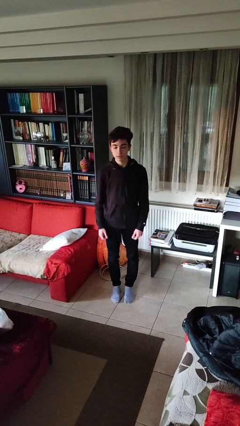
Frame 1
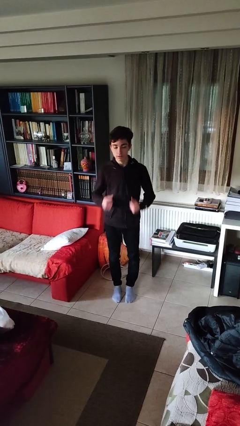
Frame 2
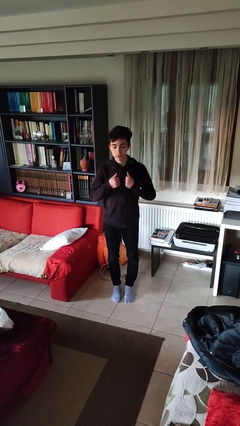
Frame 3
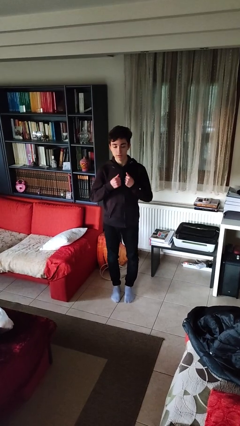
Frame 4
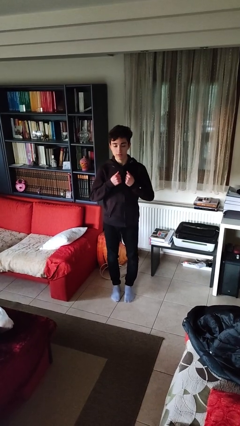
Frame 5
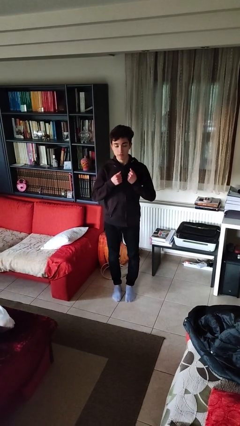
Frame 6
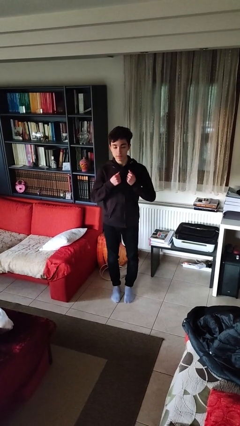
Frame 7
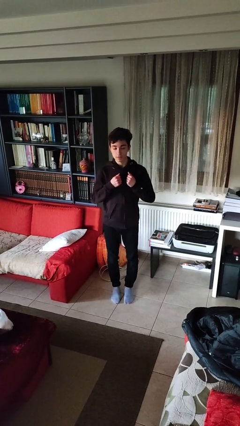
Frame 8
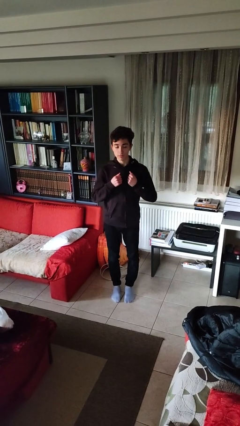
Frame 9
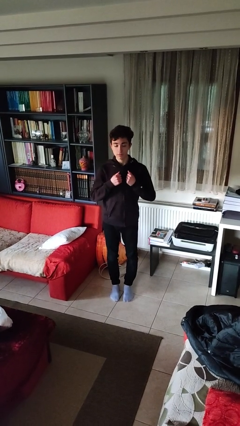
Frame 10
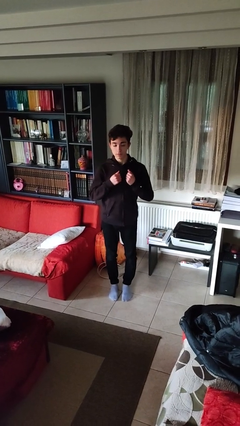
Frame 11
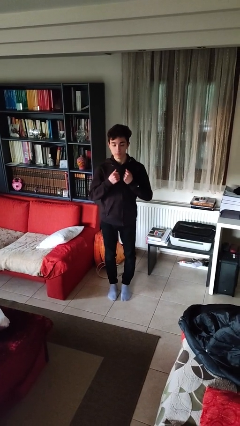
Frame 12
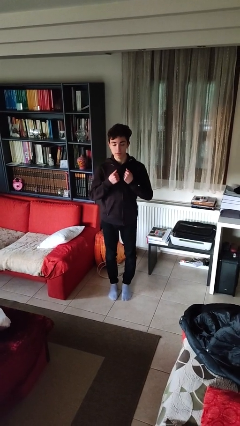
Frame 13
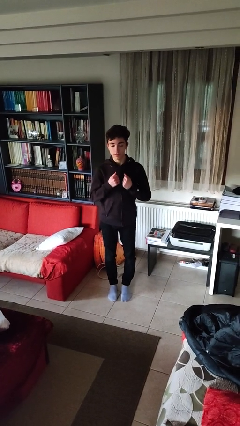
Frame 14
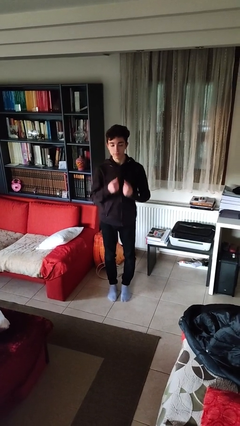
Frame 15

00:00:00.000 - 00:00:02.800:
person drums on chest

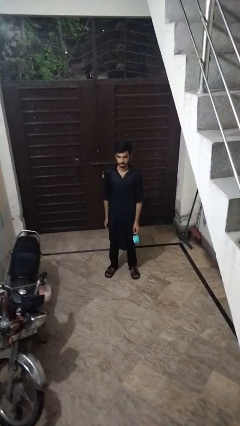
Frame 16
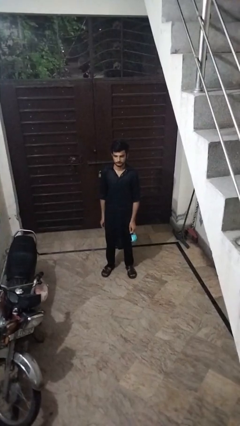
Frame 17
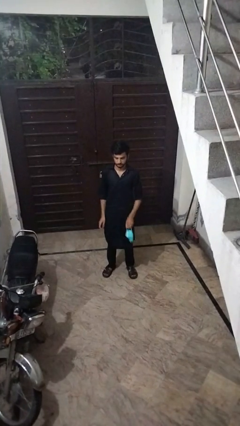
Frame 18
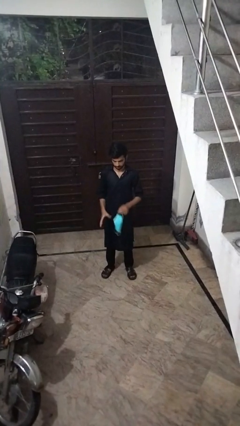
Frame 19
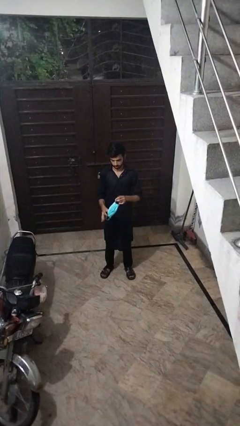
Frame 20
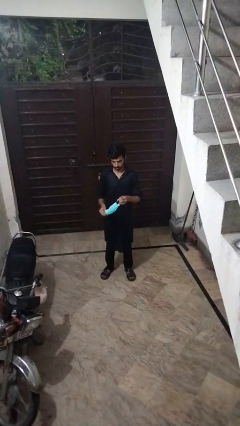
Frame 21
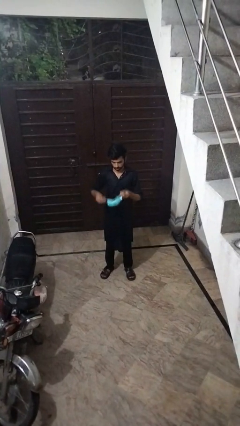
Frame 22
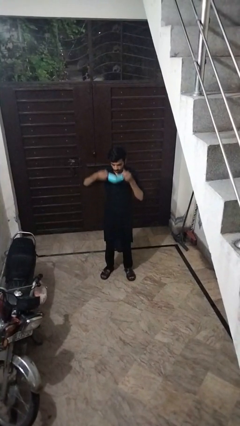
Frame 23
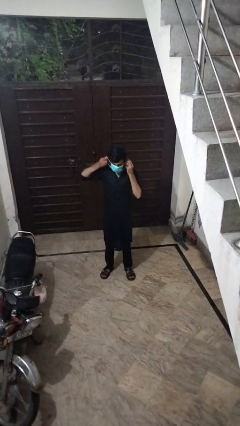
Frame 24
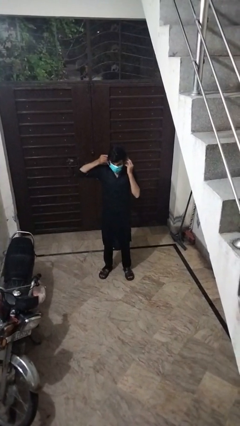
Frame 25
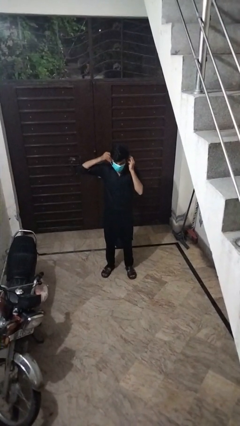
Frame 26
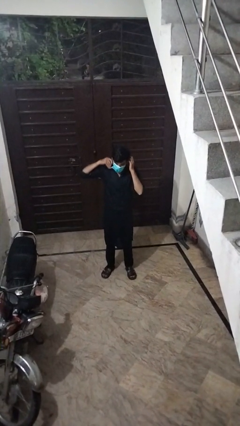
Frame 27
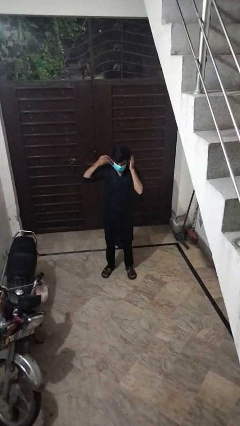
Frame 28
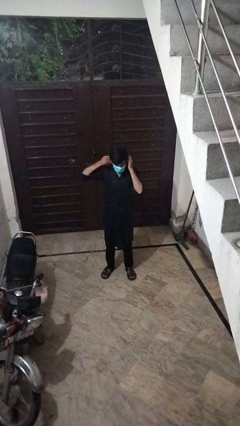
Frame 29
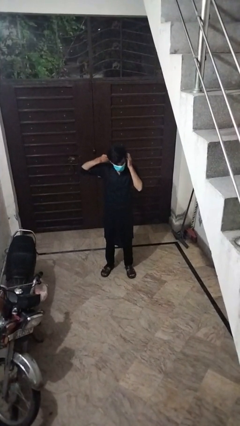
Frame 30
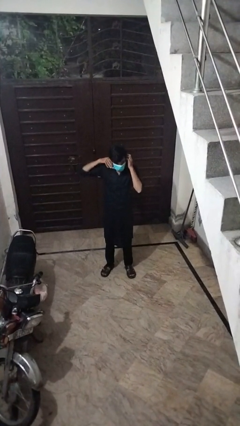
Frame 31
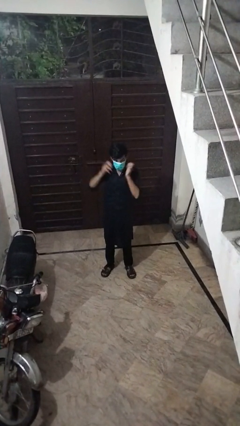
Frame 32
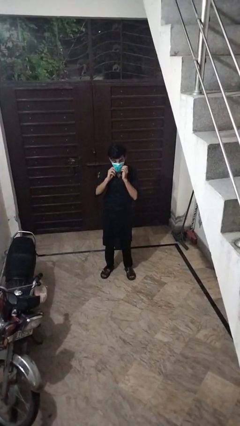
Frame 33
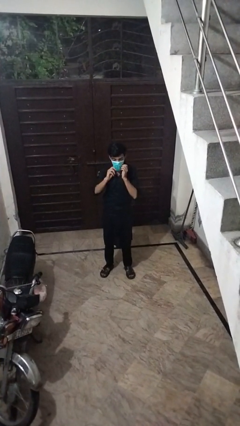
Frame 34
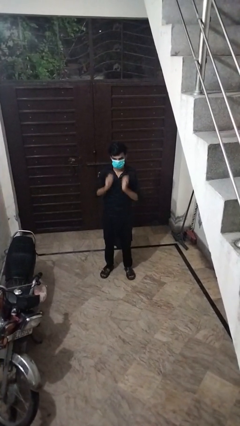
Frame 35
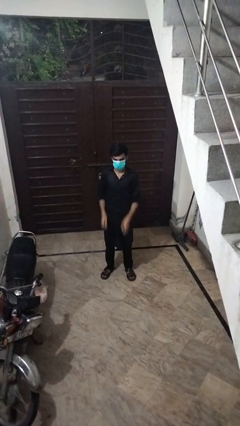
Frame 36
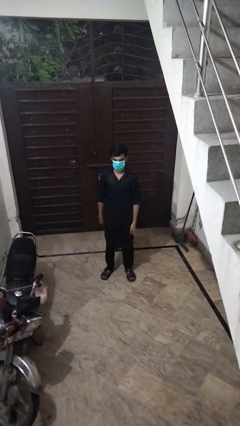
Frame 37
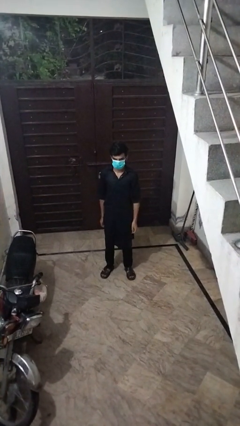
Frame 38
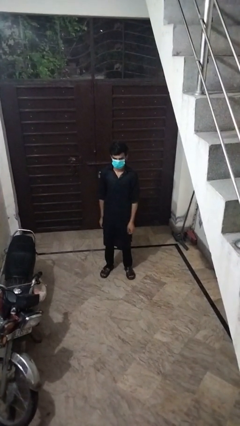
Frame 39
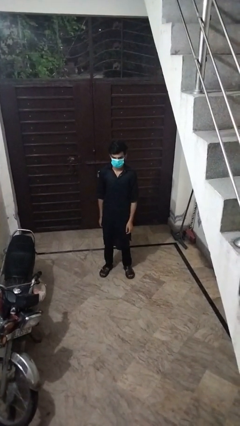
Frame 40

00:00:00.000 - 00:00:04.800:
person puts on facemask

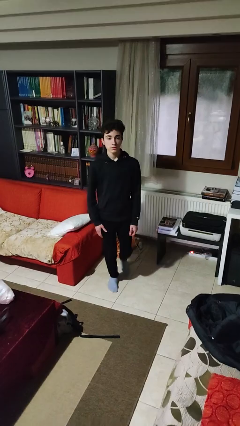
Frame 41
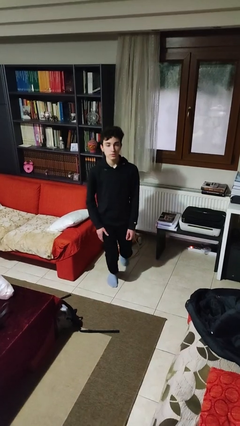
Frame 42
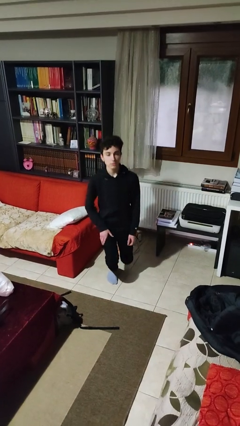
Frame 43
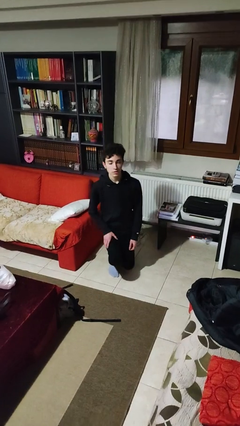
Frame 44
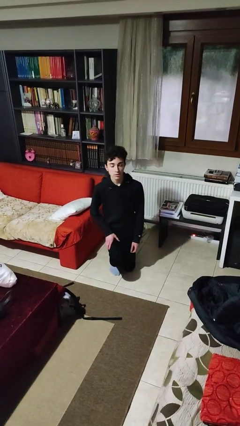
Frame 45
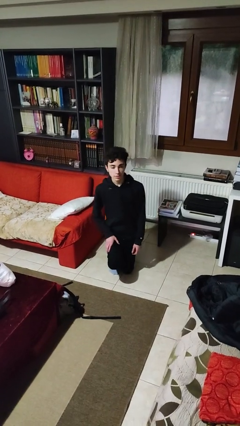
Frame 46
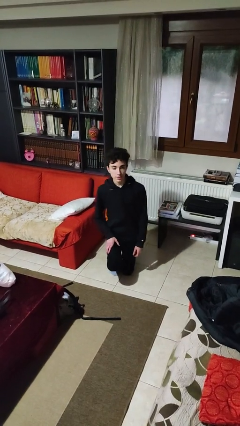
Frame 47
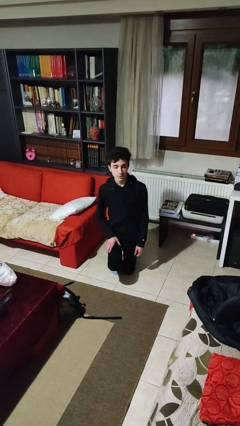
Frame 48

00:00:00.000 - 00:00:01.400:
person kneels

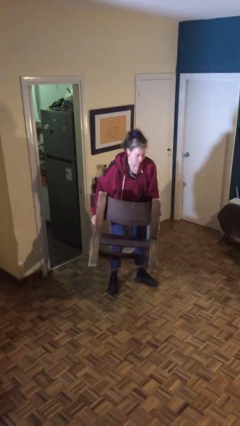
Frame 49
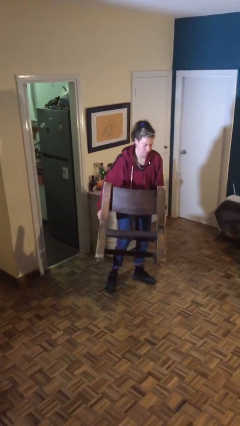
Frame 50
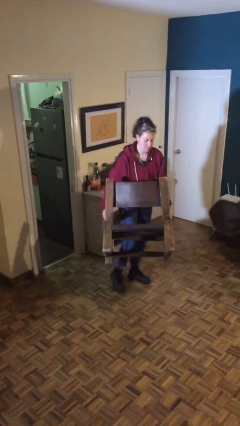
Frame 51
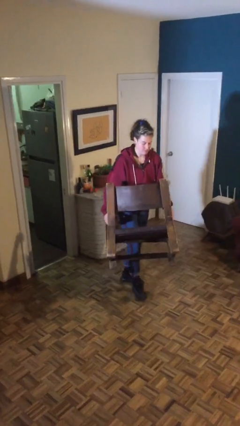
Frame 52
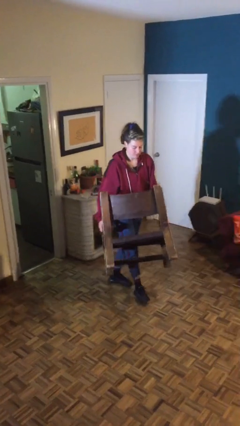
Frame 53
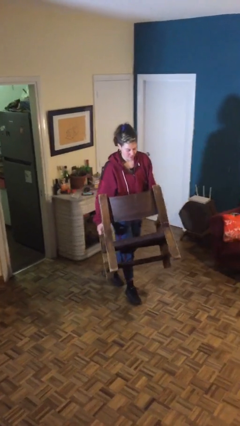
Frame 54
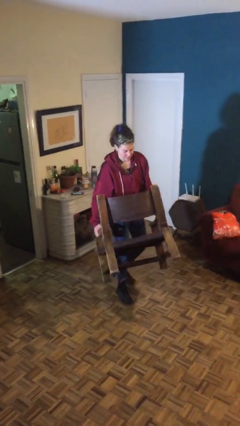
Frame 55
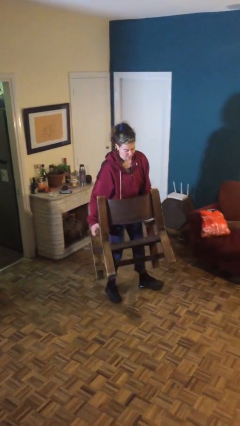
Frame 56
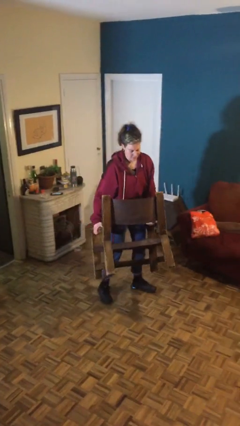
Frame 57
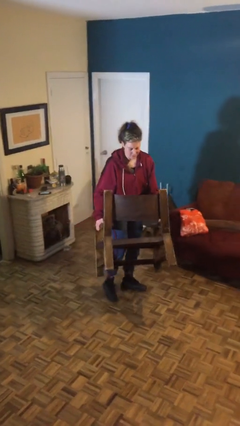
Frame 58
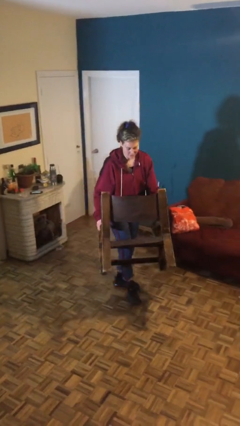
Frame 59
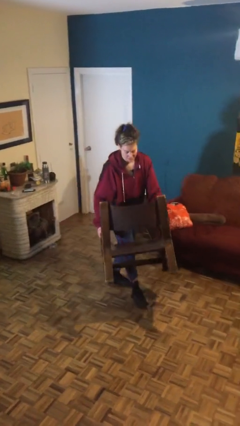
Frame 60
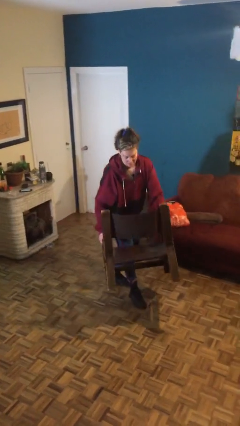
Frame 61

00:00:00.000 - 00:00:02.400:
person carries heavy object

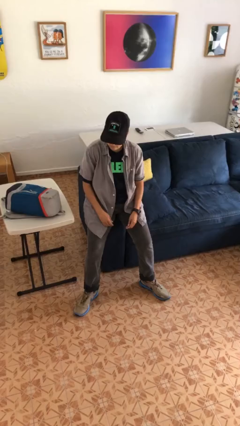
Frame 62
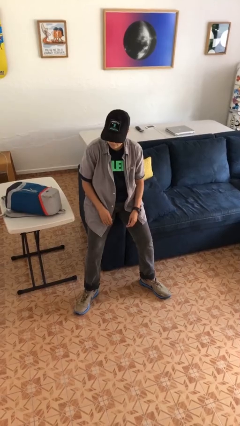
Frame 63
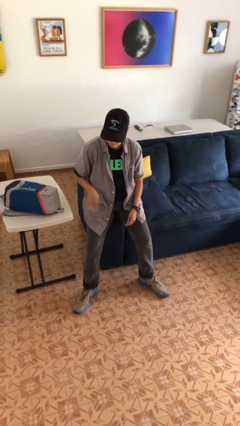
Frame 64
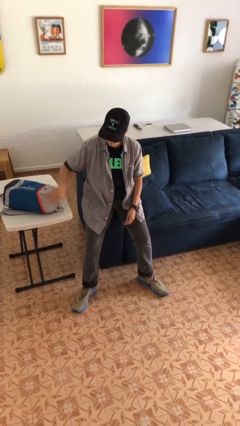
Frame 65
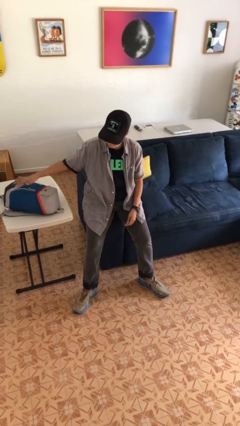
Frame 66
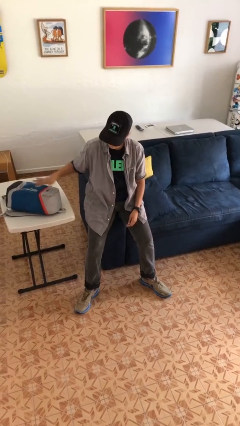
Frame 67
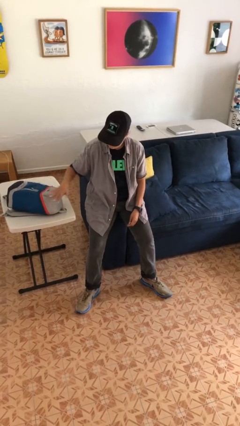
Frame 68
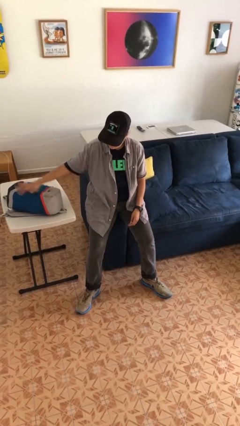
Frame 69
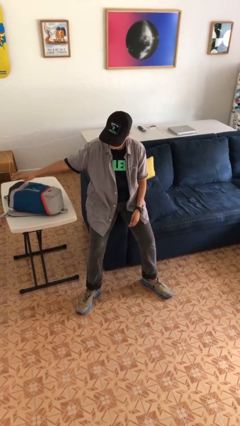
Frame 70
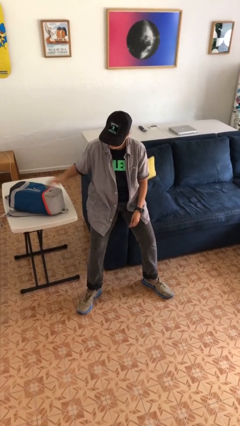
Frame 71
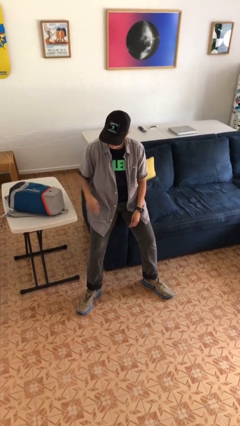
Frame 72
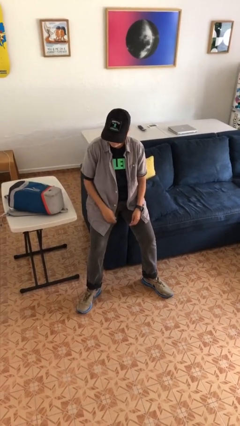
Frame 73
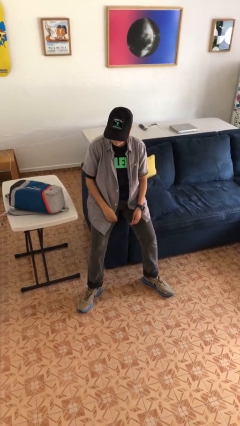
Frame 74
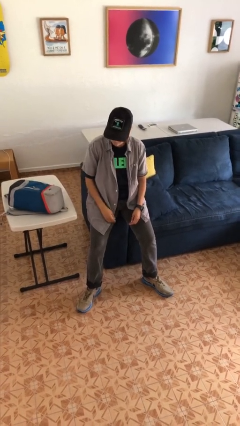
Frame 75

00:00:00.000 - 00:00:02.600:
person waves hand over object

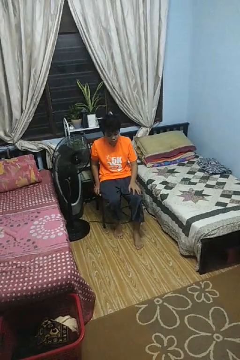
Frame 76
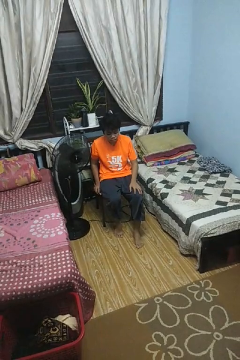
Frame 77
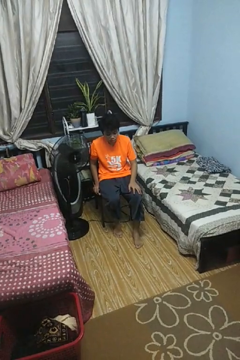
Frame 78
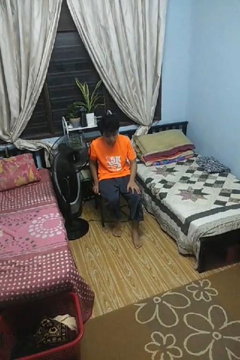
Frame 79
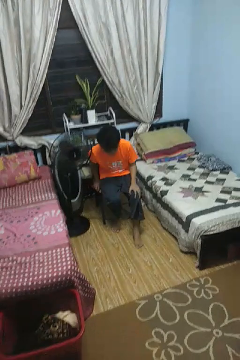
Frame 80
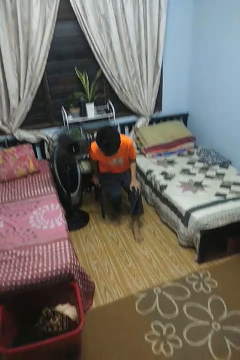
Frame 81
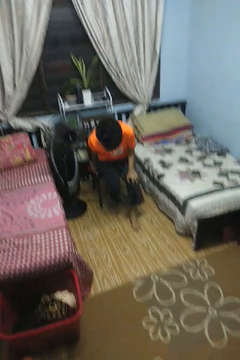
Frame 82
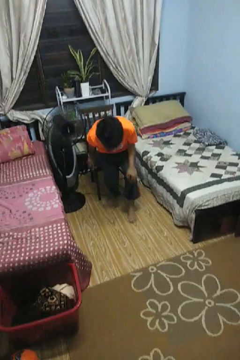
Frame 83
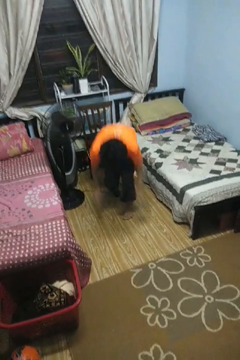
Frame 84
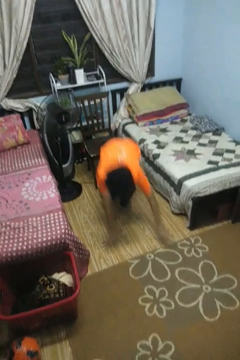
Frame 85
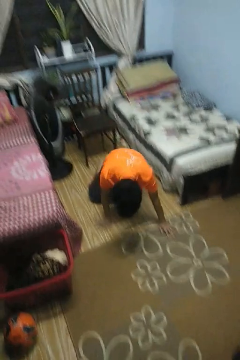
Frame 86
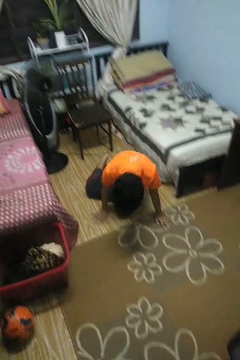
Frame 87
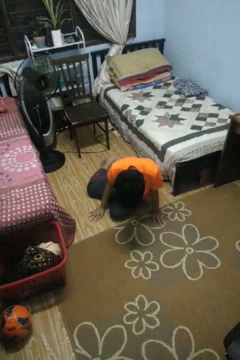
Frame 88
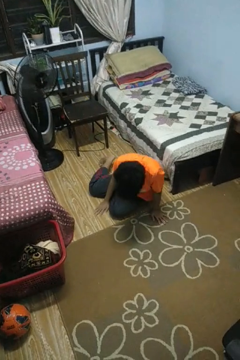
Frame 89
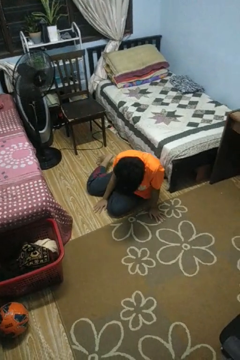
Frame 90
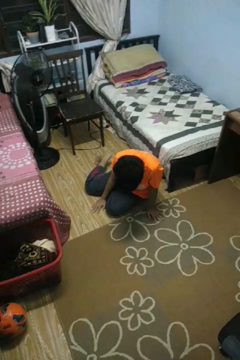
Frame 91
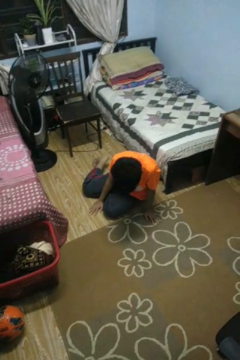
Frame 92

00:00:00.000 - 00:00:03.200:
person falls from chair

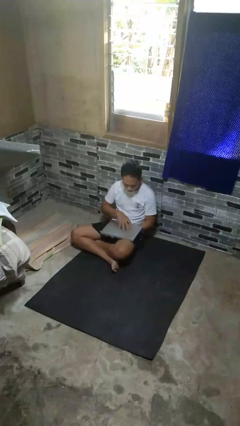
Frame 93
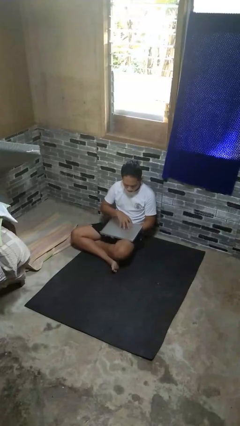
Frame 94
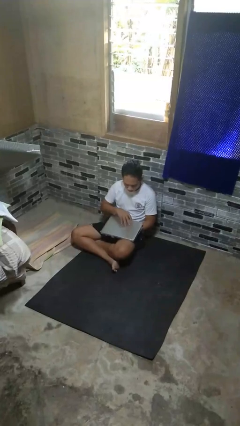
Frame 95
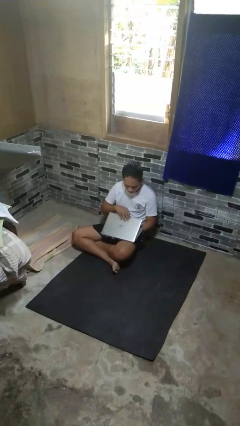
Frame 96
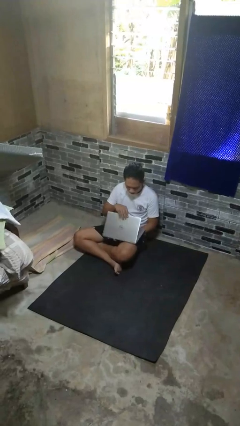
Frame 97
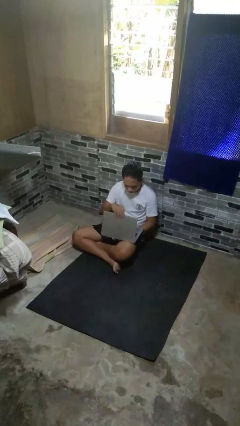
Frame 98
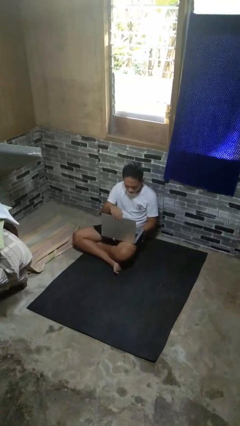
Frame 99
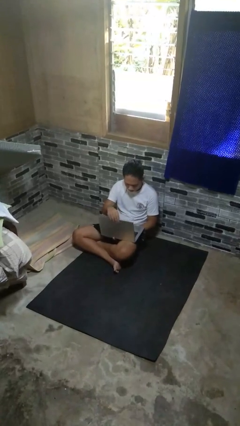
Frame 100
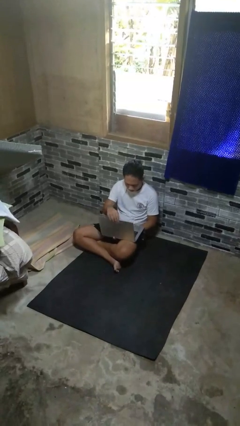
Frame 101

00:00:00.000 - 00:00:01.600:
person opens laptop
